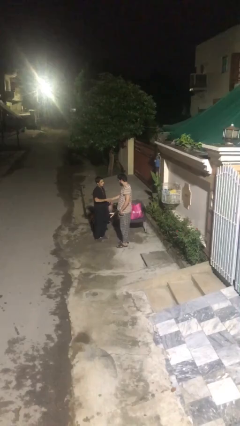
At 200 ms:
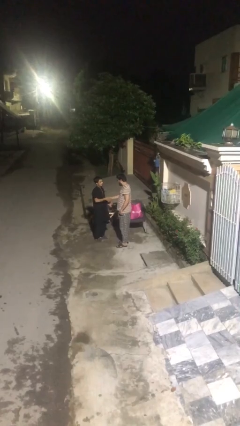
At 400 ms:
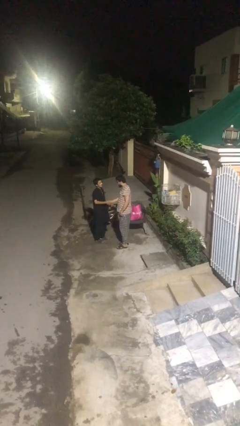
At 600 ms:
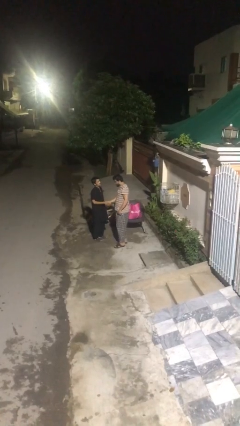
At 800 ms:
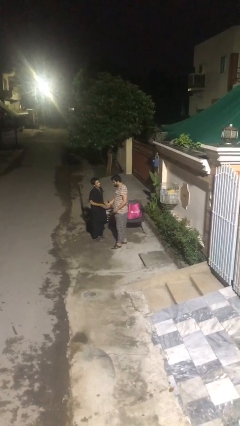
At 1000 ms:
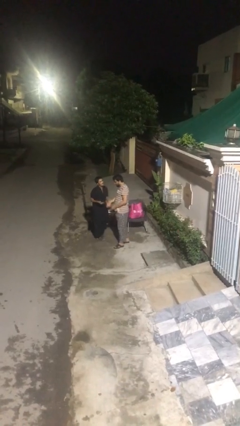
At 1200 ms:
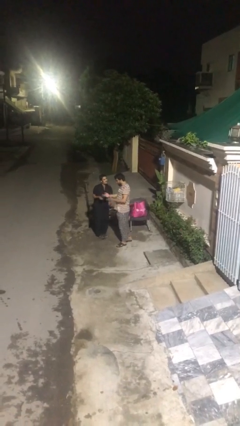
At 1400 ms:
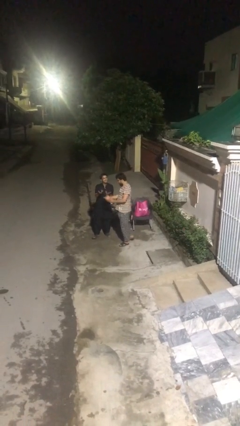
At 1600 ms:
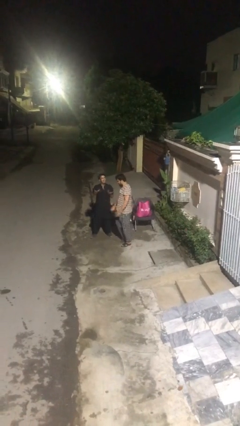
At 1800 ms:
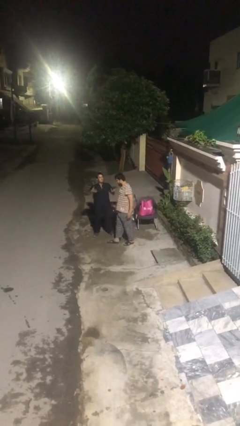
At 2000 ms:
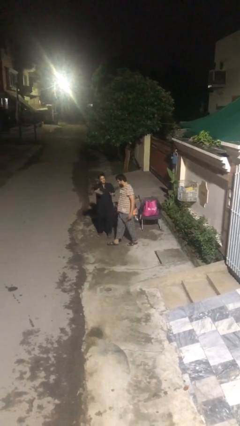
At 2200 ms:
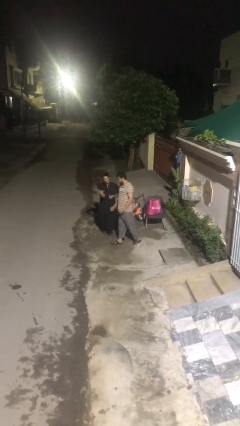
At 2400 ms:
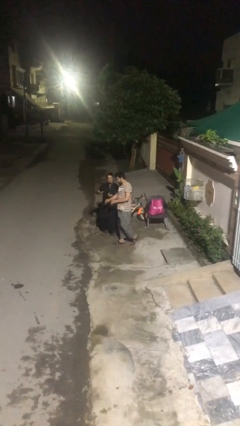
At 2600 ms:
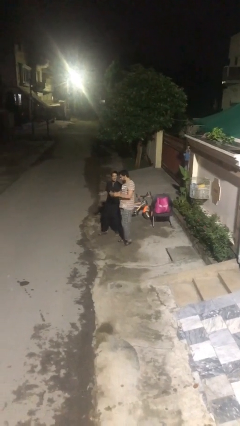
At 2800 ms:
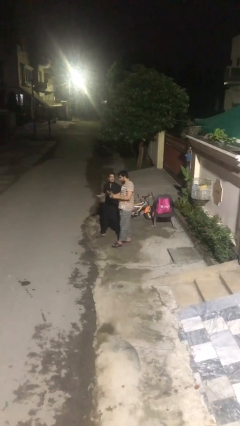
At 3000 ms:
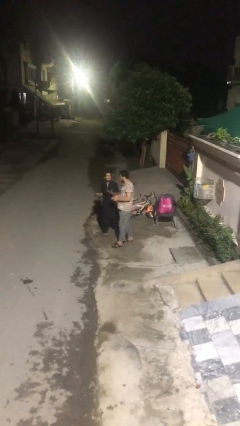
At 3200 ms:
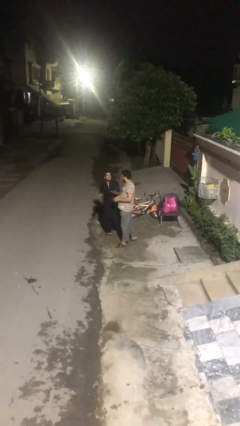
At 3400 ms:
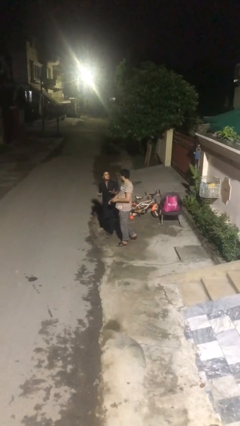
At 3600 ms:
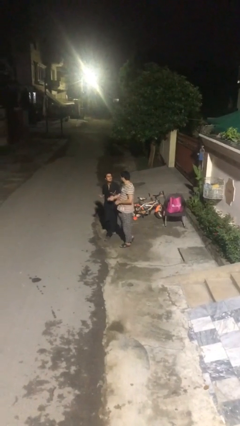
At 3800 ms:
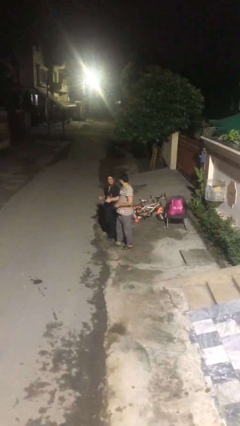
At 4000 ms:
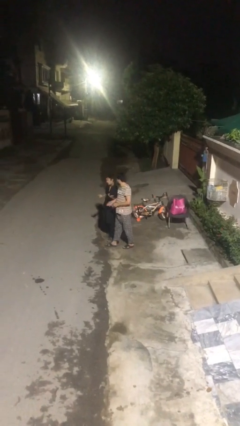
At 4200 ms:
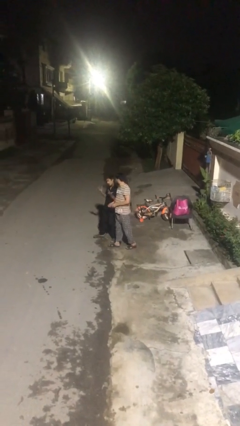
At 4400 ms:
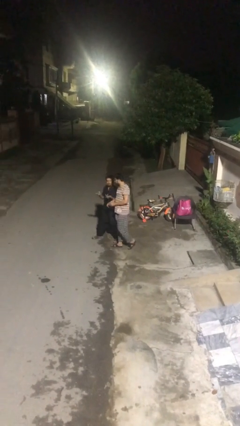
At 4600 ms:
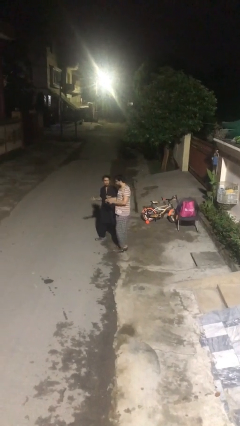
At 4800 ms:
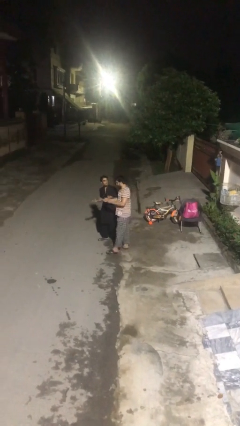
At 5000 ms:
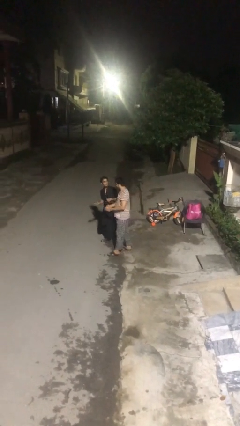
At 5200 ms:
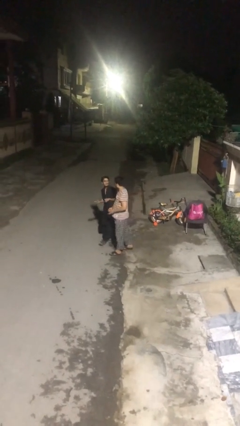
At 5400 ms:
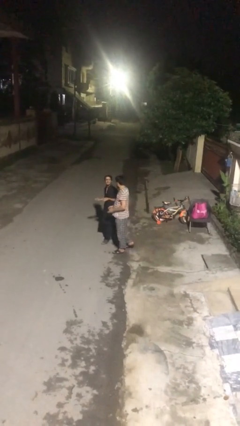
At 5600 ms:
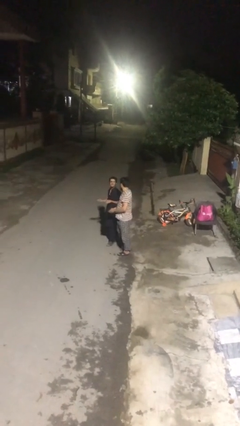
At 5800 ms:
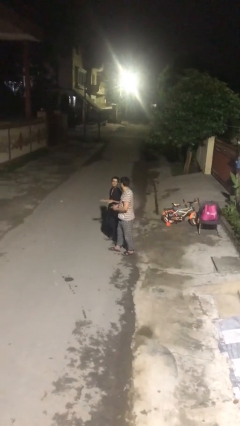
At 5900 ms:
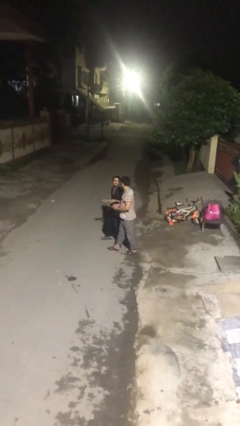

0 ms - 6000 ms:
person talks to person

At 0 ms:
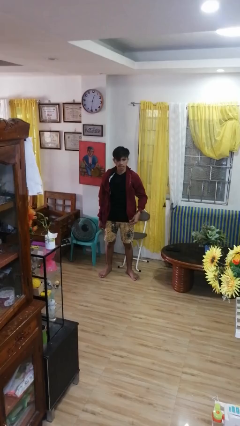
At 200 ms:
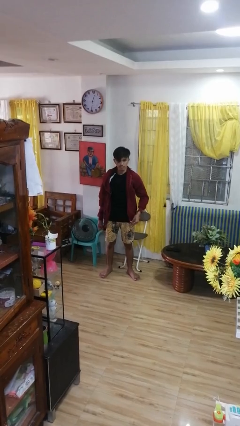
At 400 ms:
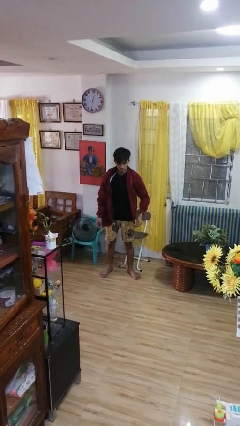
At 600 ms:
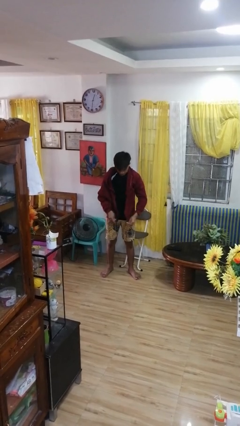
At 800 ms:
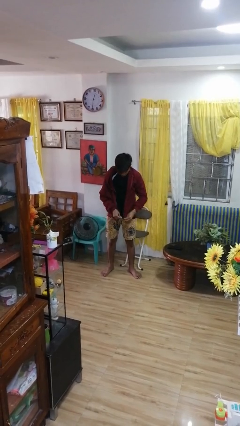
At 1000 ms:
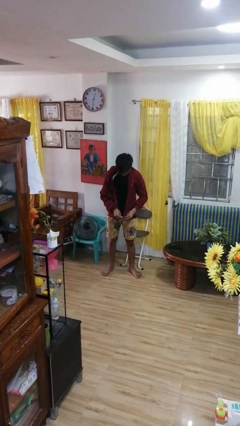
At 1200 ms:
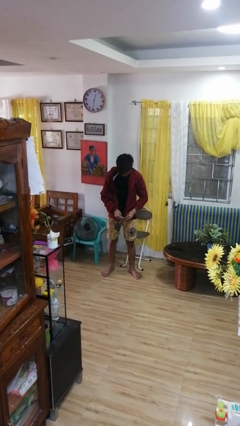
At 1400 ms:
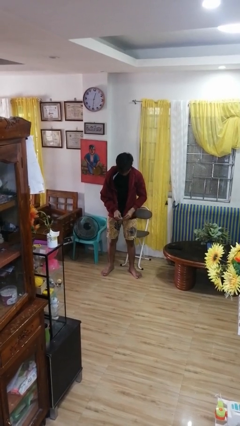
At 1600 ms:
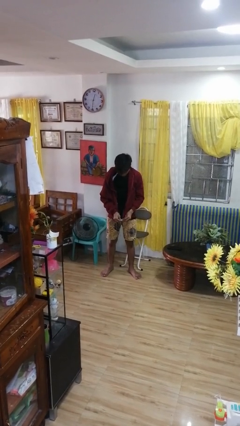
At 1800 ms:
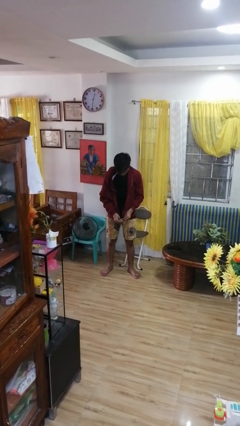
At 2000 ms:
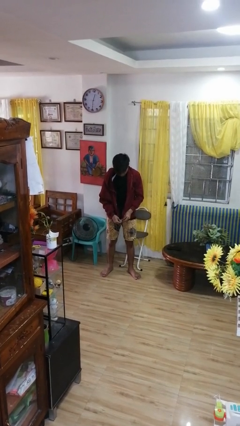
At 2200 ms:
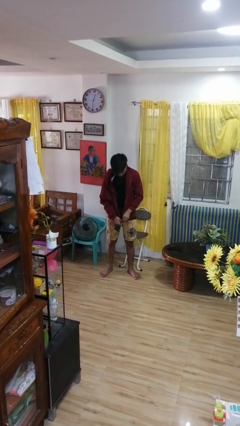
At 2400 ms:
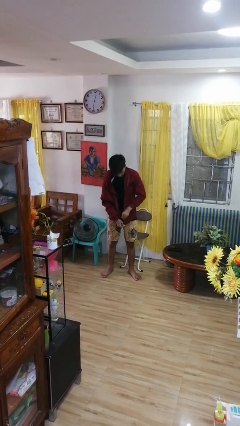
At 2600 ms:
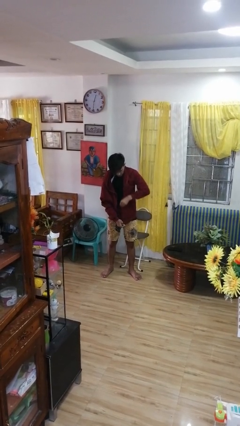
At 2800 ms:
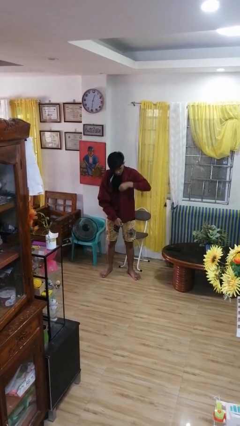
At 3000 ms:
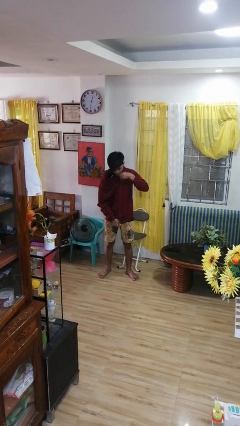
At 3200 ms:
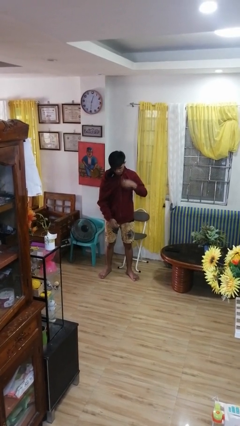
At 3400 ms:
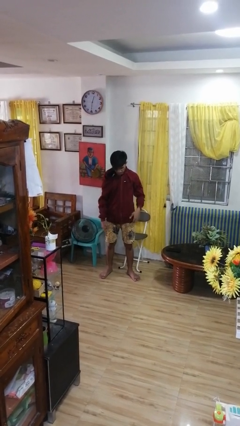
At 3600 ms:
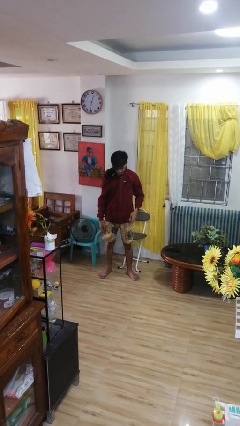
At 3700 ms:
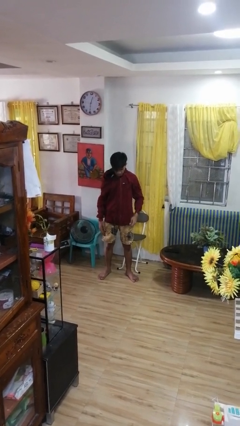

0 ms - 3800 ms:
person zips up jacket

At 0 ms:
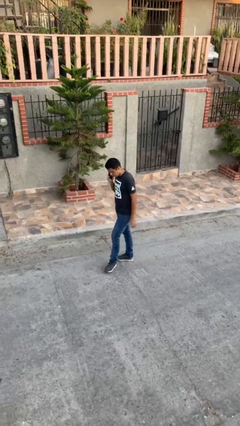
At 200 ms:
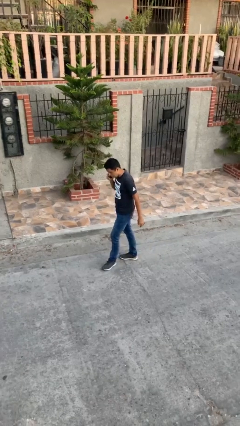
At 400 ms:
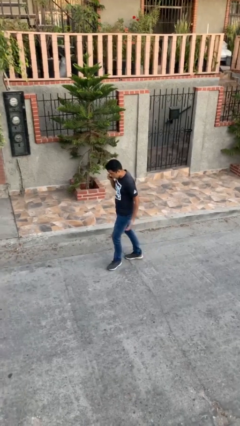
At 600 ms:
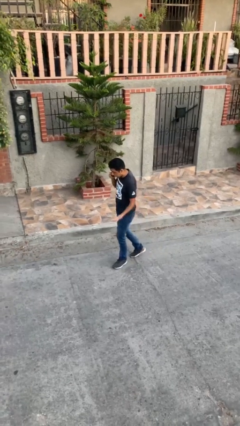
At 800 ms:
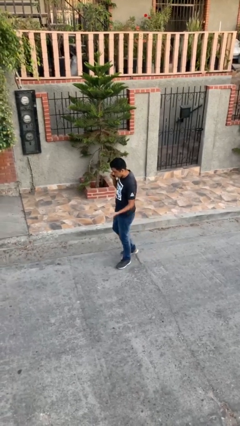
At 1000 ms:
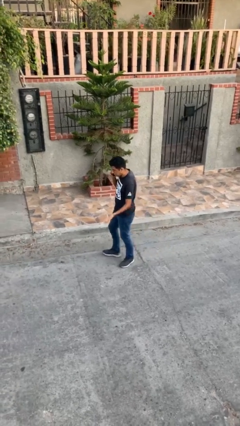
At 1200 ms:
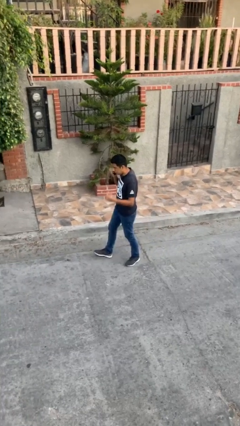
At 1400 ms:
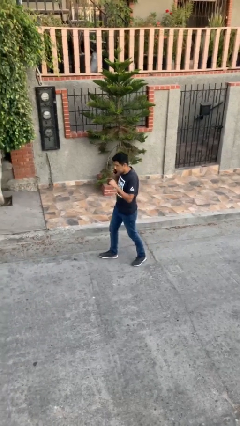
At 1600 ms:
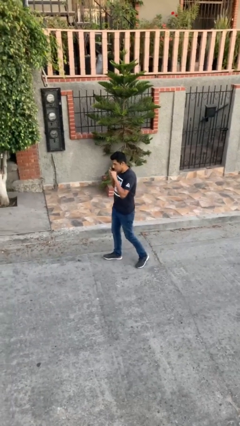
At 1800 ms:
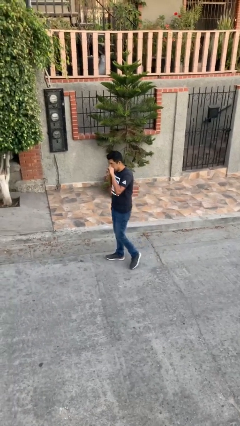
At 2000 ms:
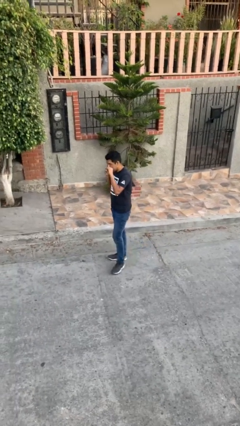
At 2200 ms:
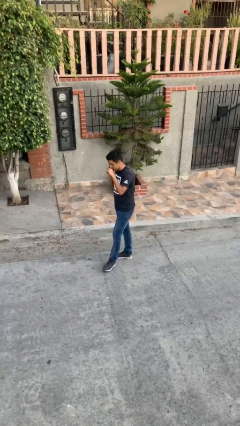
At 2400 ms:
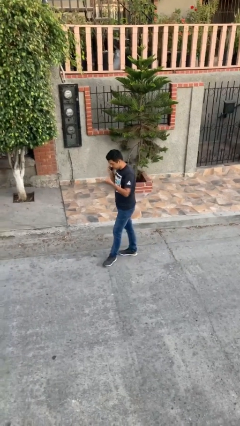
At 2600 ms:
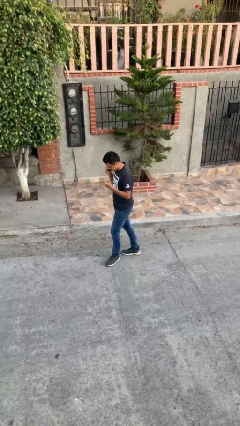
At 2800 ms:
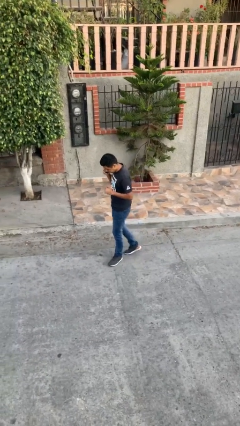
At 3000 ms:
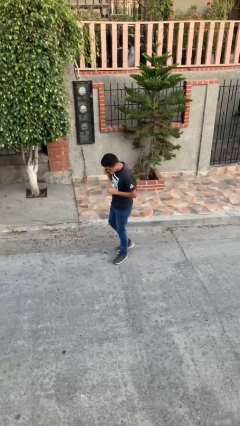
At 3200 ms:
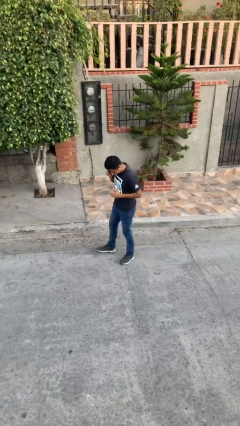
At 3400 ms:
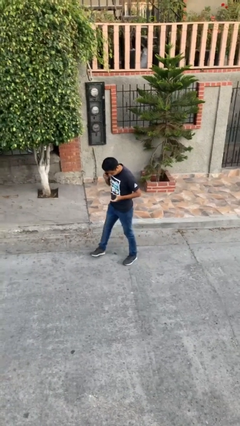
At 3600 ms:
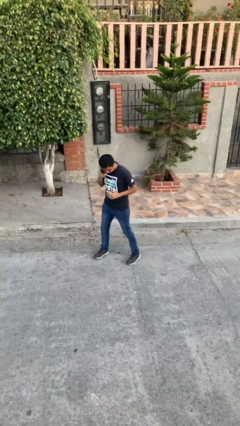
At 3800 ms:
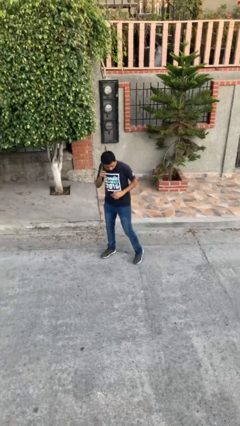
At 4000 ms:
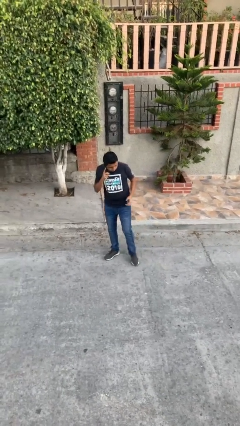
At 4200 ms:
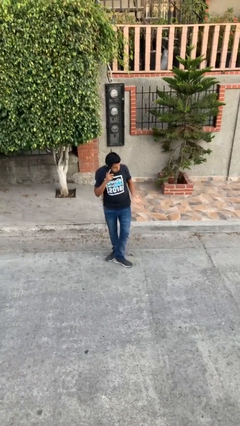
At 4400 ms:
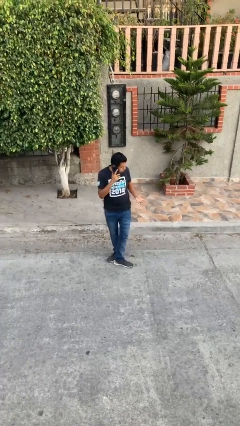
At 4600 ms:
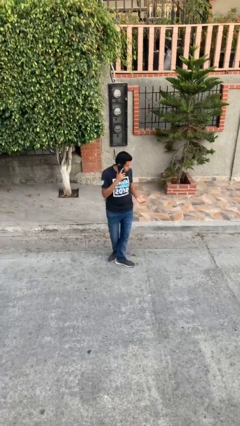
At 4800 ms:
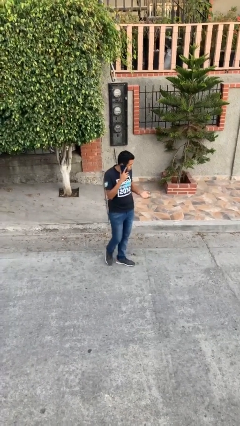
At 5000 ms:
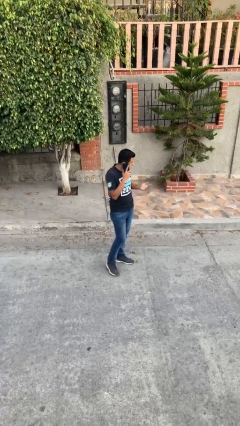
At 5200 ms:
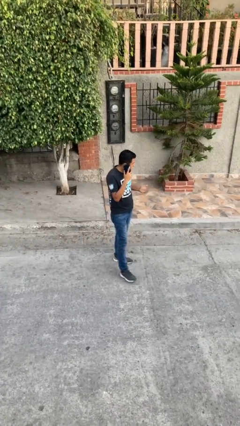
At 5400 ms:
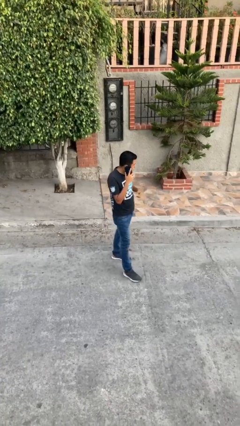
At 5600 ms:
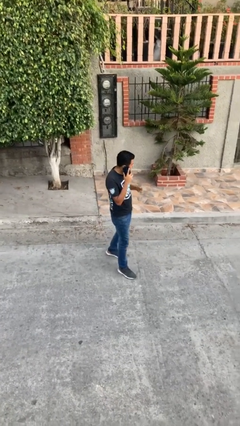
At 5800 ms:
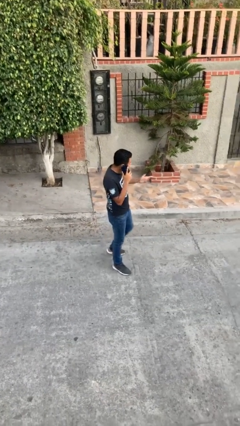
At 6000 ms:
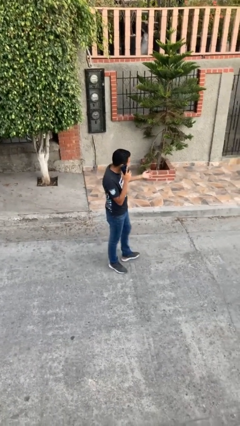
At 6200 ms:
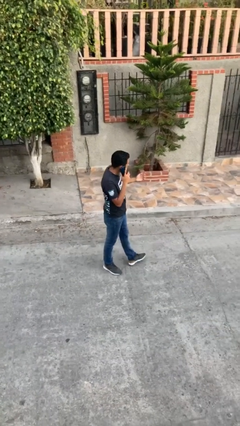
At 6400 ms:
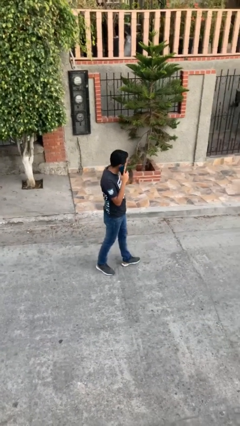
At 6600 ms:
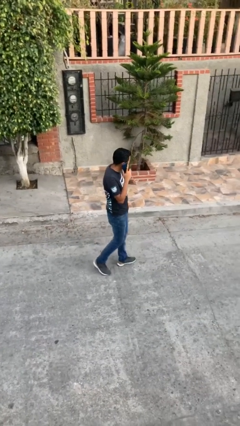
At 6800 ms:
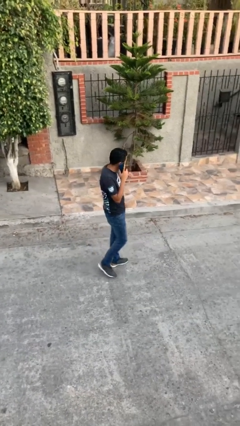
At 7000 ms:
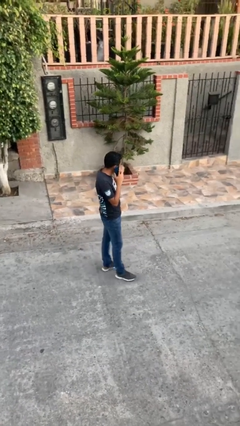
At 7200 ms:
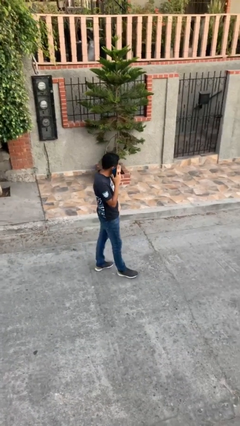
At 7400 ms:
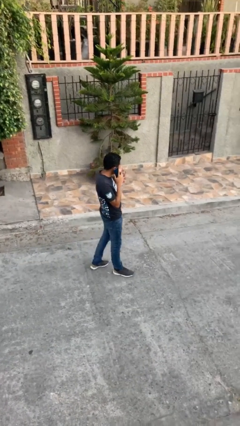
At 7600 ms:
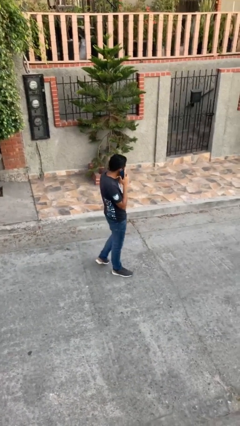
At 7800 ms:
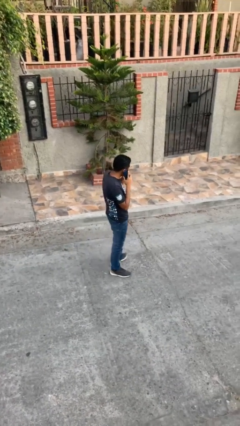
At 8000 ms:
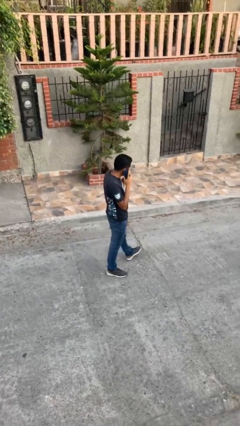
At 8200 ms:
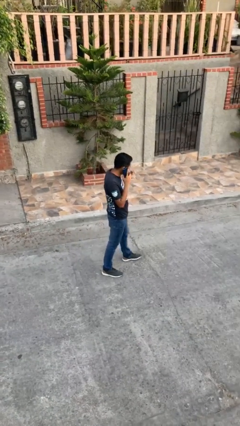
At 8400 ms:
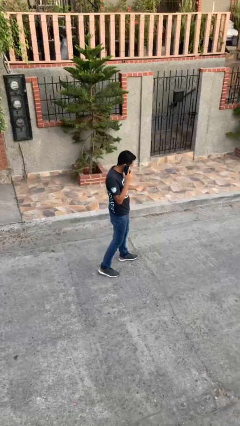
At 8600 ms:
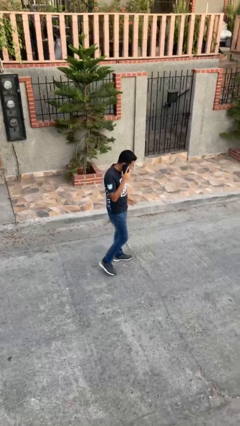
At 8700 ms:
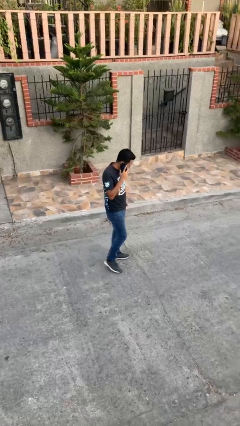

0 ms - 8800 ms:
person talks on phone
